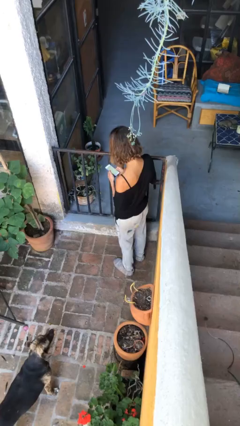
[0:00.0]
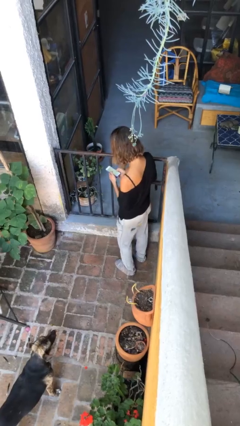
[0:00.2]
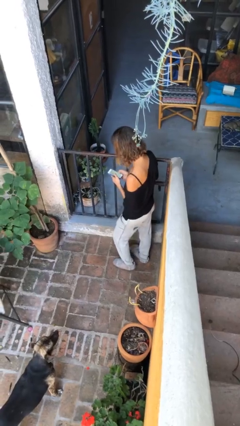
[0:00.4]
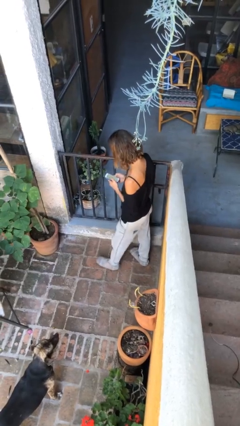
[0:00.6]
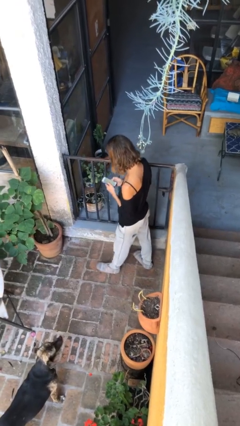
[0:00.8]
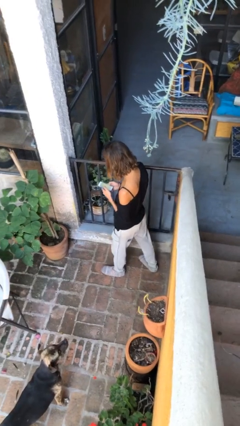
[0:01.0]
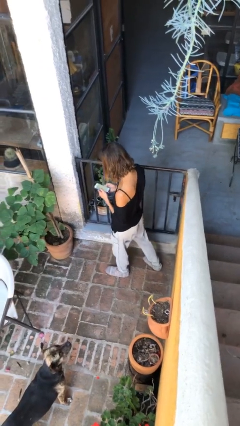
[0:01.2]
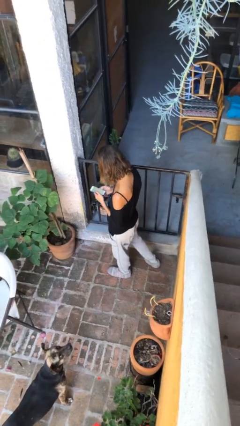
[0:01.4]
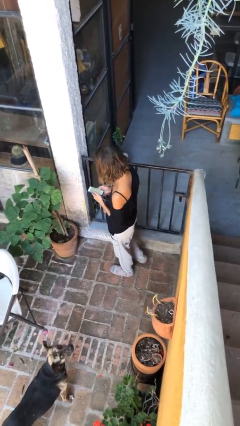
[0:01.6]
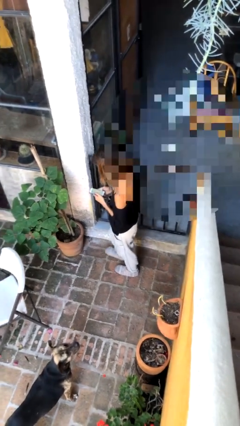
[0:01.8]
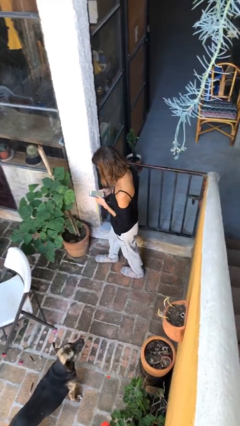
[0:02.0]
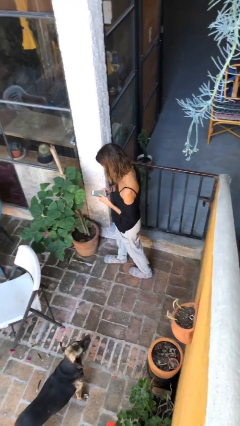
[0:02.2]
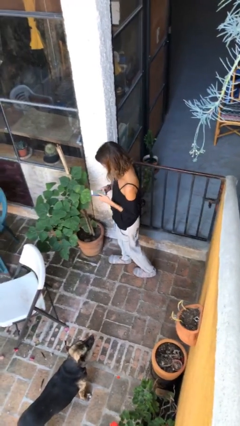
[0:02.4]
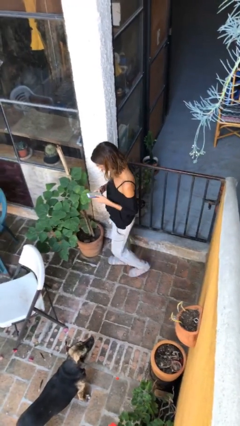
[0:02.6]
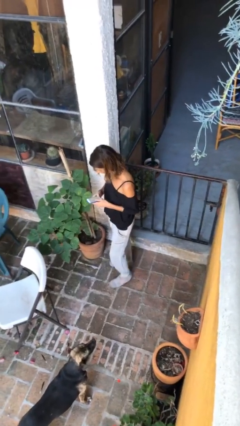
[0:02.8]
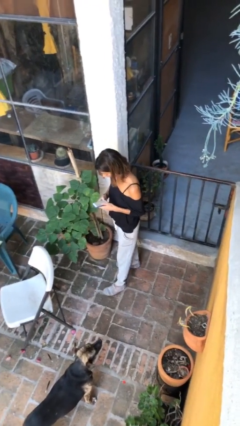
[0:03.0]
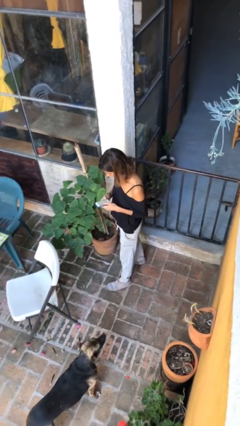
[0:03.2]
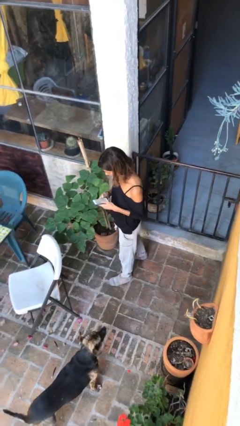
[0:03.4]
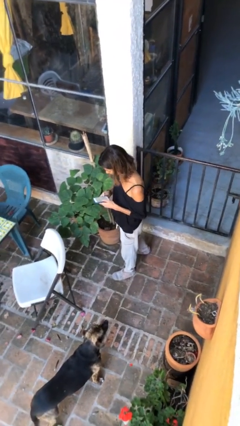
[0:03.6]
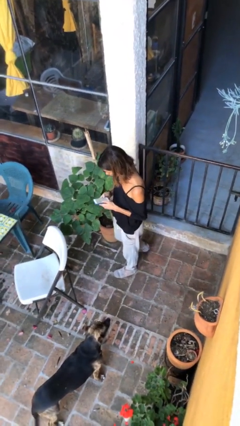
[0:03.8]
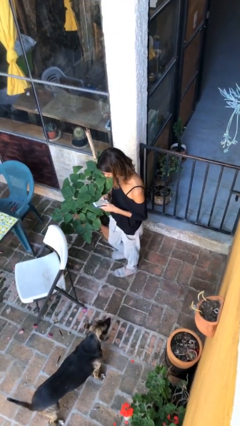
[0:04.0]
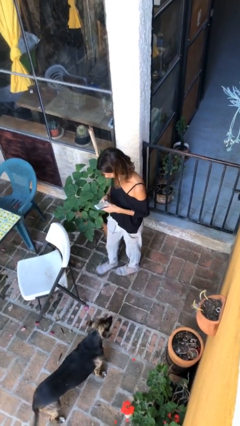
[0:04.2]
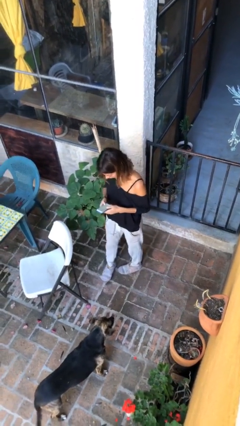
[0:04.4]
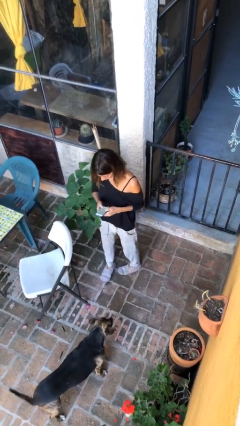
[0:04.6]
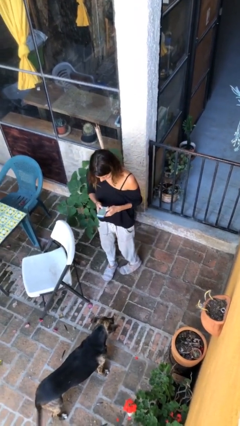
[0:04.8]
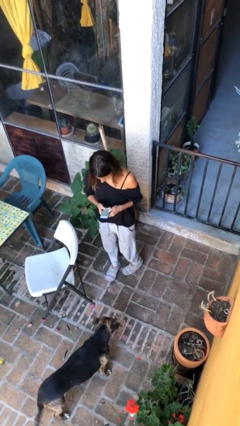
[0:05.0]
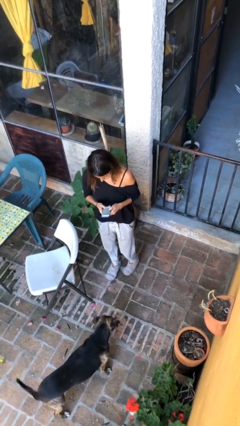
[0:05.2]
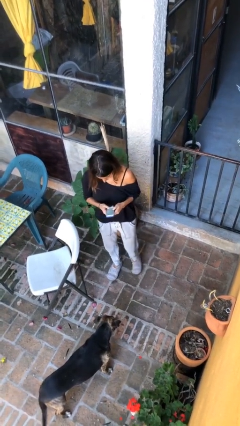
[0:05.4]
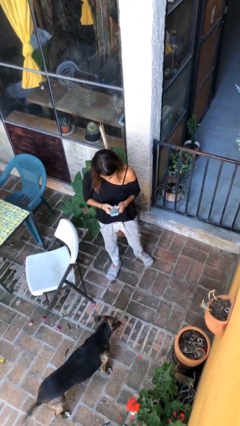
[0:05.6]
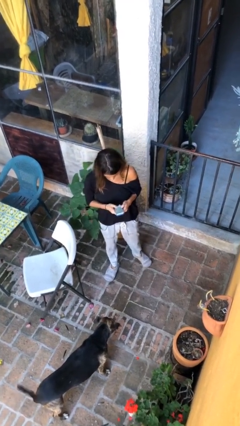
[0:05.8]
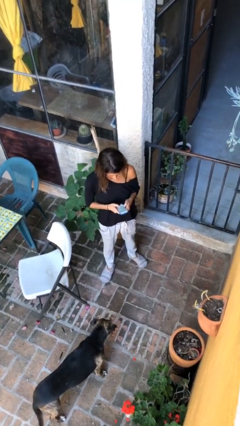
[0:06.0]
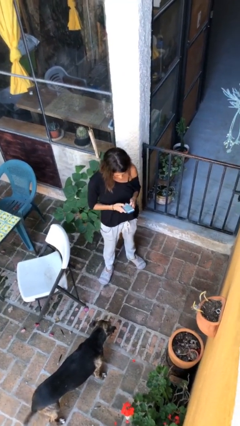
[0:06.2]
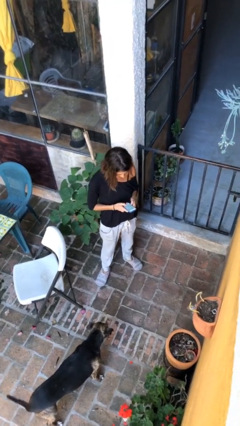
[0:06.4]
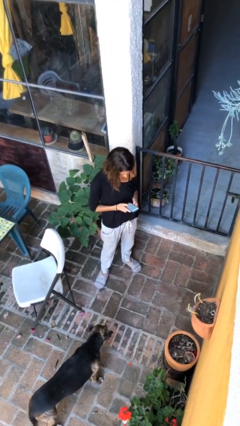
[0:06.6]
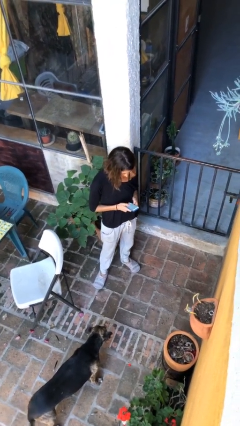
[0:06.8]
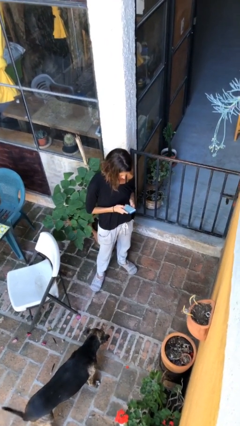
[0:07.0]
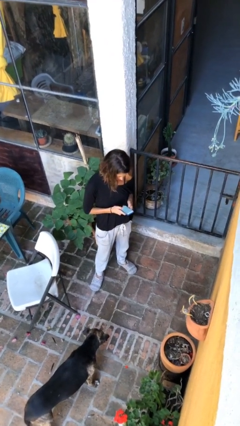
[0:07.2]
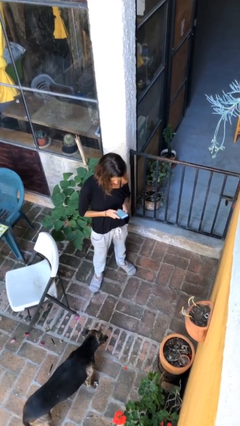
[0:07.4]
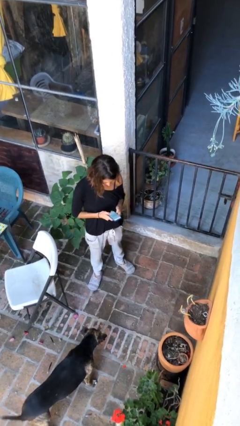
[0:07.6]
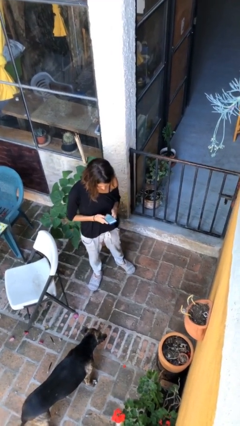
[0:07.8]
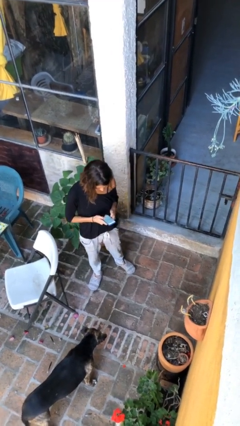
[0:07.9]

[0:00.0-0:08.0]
person texts on phone

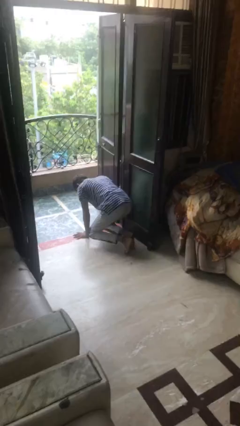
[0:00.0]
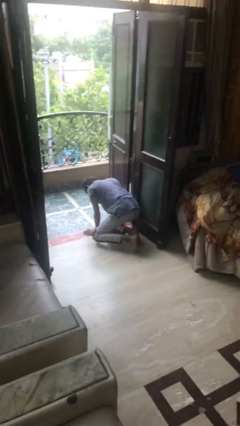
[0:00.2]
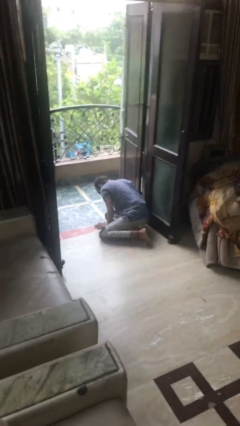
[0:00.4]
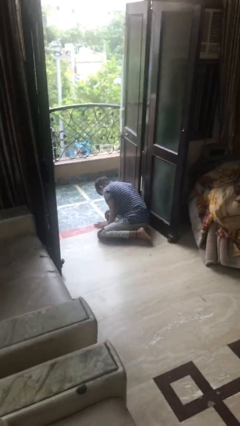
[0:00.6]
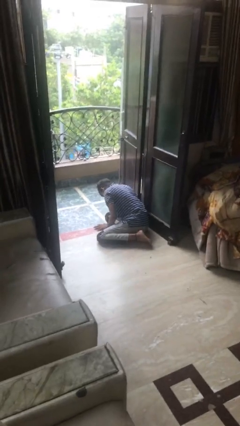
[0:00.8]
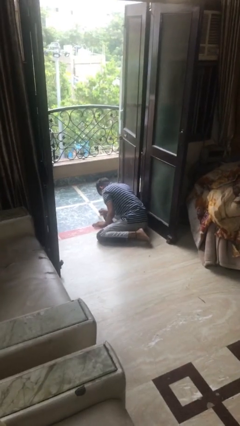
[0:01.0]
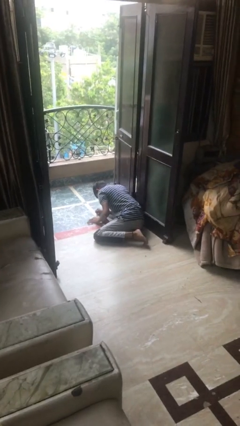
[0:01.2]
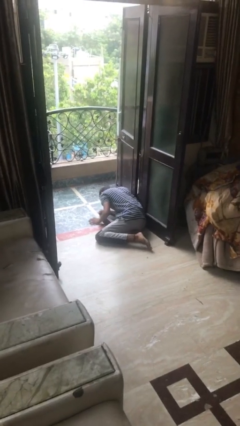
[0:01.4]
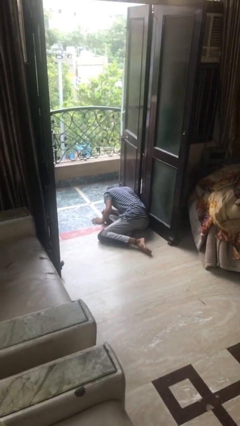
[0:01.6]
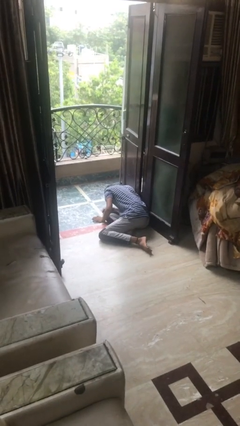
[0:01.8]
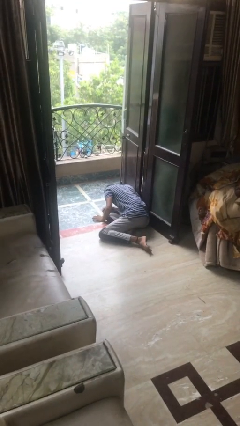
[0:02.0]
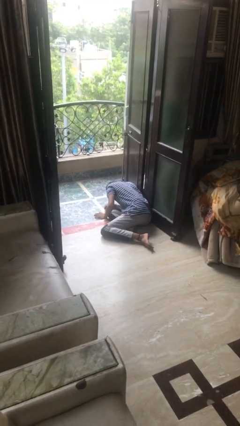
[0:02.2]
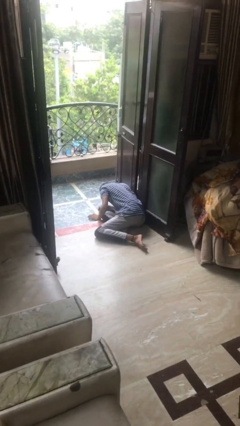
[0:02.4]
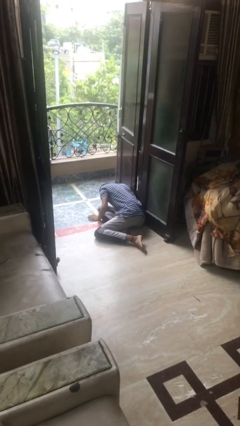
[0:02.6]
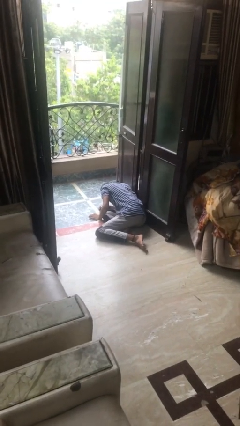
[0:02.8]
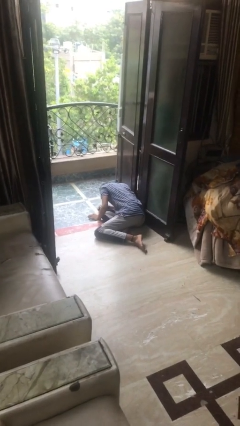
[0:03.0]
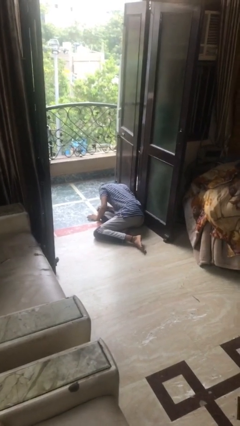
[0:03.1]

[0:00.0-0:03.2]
person lies down on floor

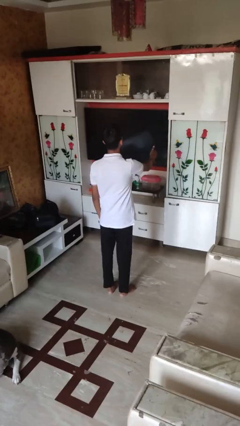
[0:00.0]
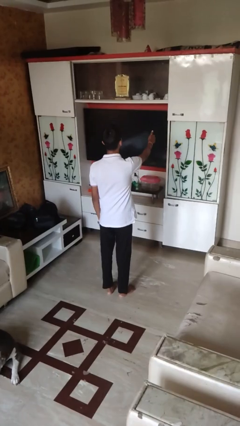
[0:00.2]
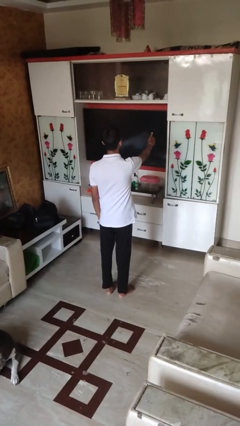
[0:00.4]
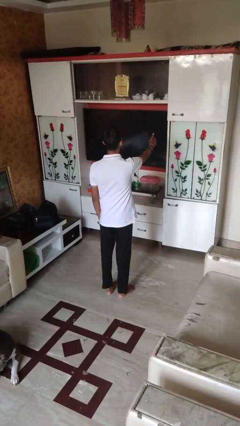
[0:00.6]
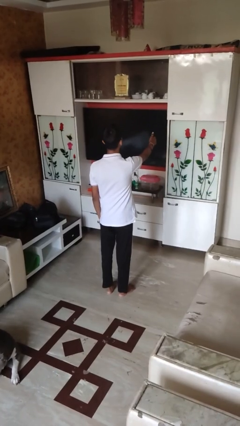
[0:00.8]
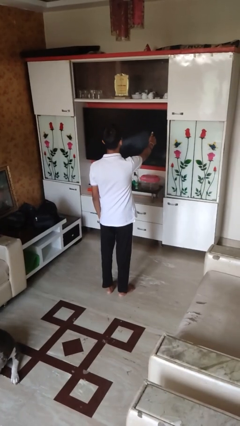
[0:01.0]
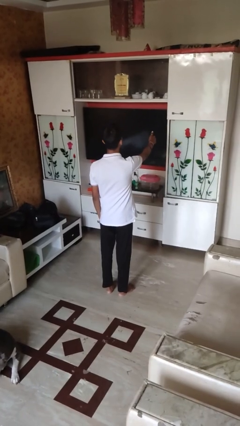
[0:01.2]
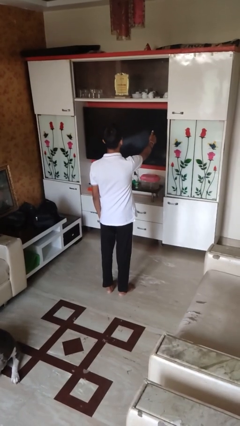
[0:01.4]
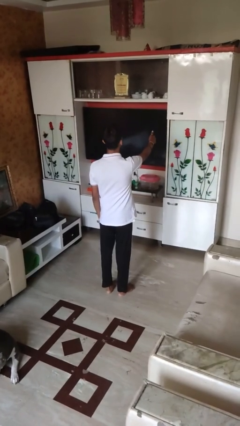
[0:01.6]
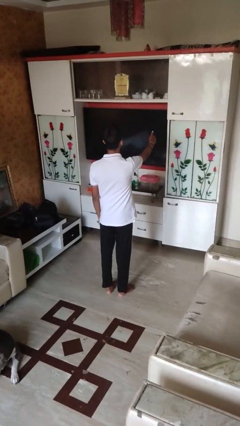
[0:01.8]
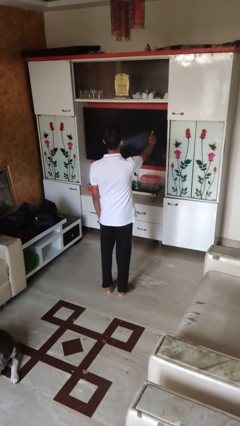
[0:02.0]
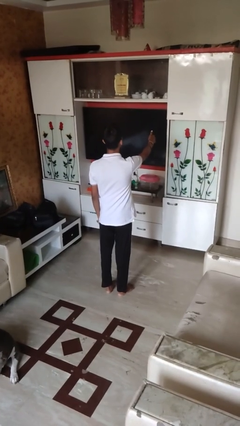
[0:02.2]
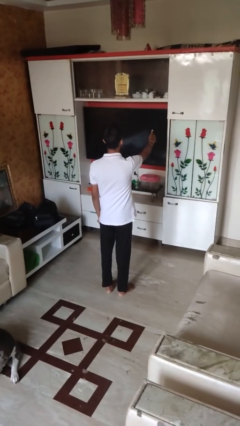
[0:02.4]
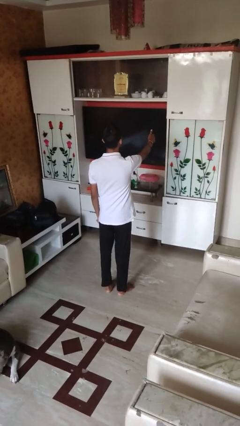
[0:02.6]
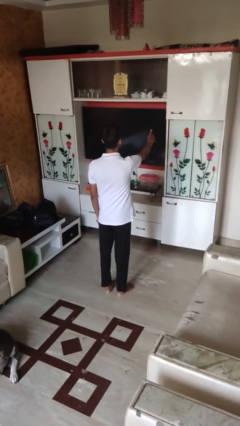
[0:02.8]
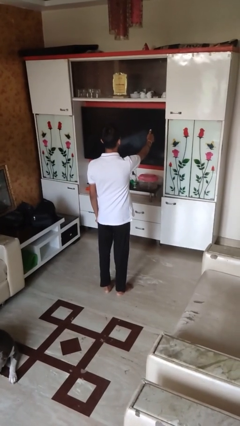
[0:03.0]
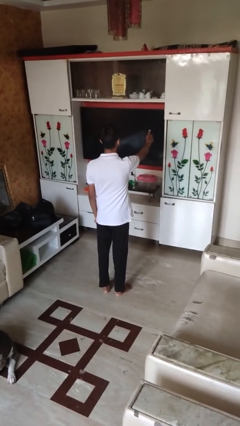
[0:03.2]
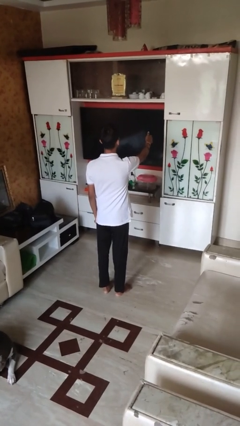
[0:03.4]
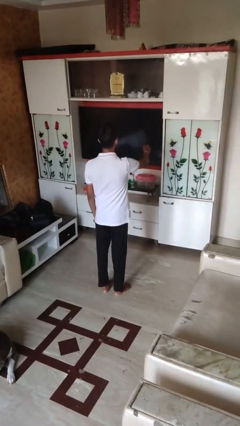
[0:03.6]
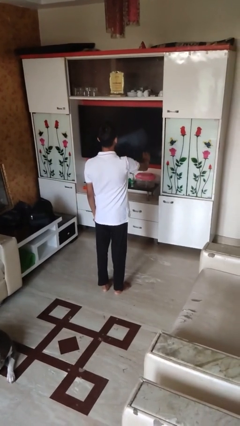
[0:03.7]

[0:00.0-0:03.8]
person gestures thumbs up

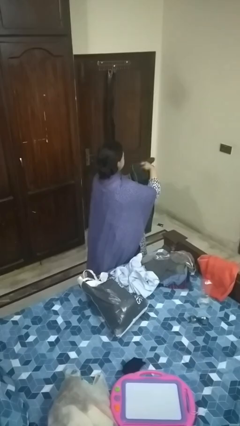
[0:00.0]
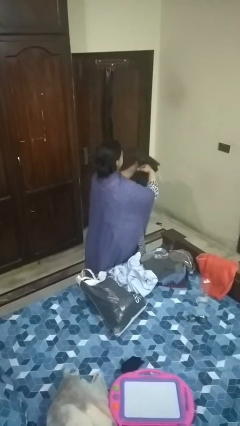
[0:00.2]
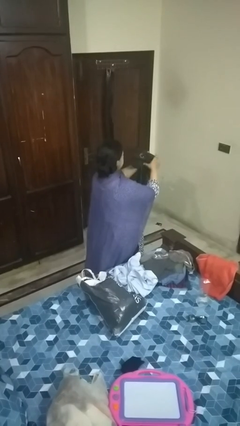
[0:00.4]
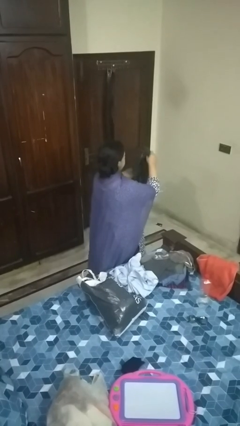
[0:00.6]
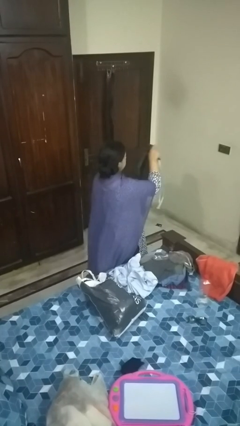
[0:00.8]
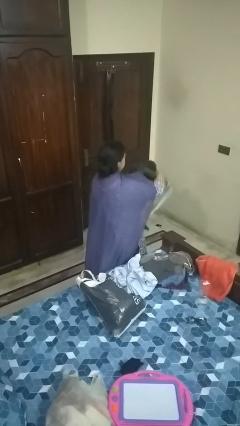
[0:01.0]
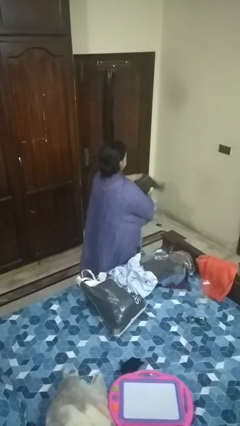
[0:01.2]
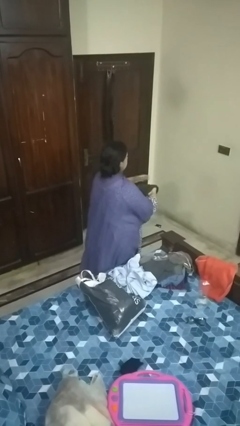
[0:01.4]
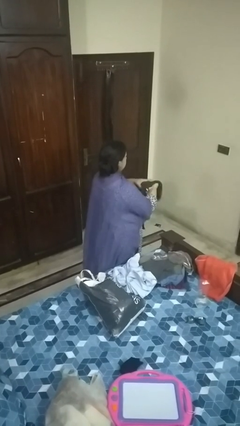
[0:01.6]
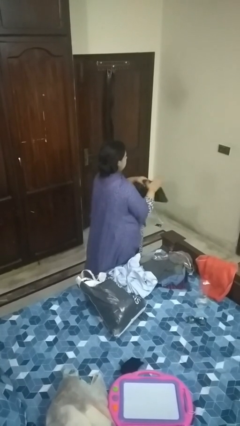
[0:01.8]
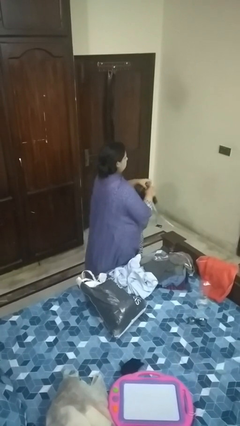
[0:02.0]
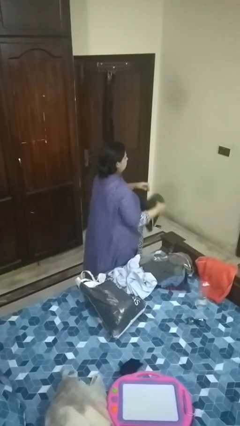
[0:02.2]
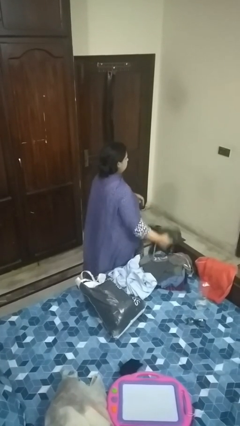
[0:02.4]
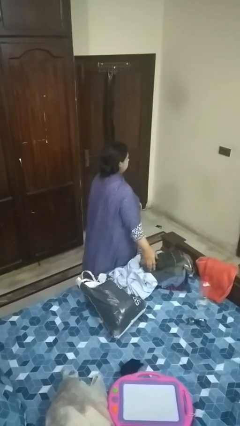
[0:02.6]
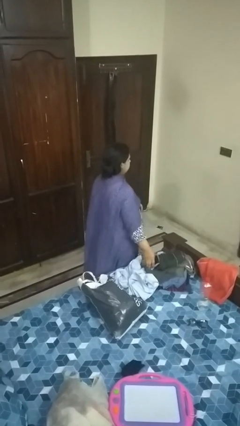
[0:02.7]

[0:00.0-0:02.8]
person folds pants
